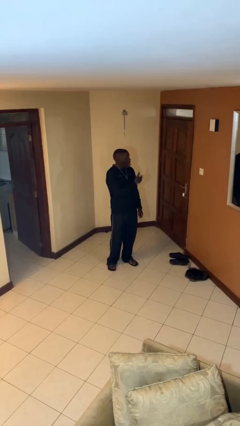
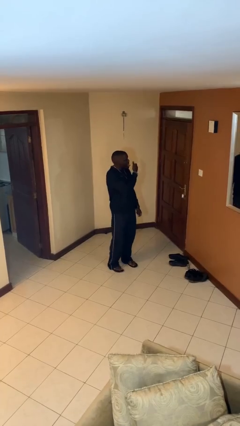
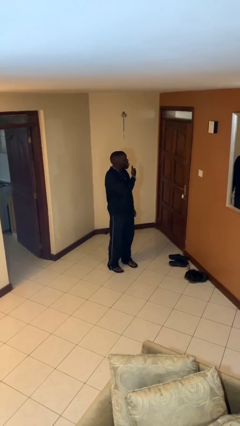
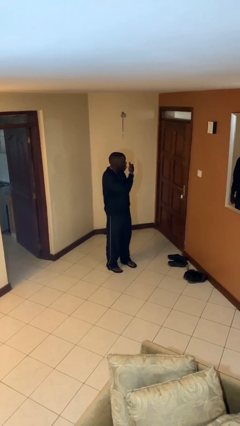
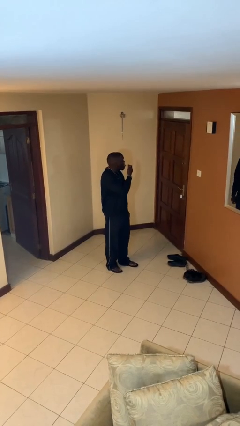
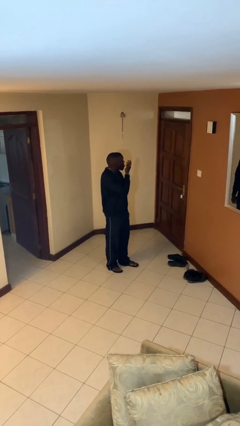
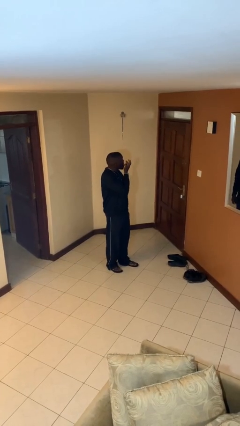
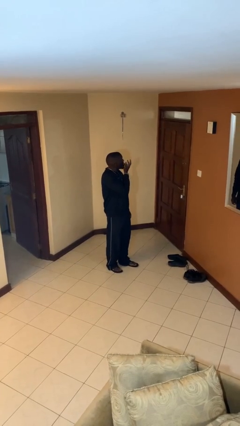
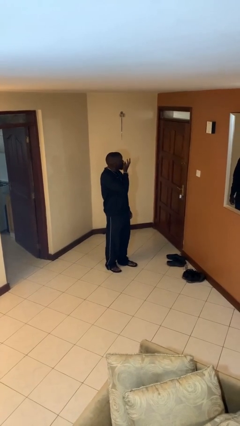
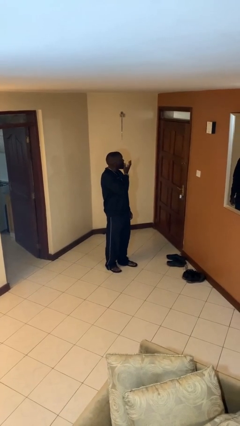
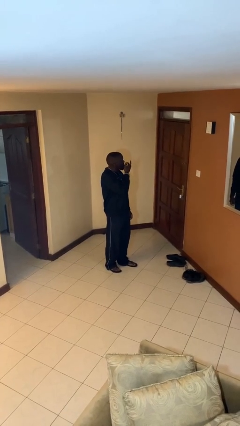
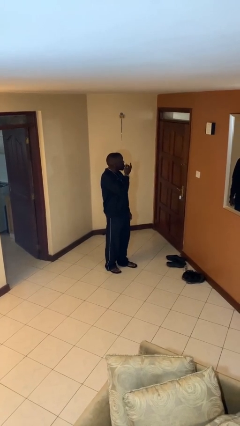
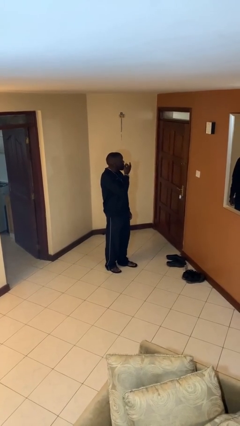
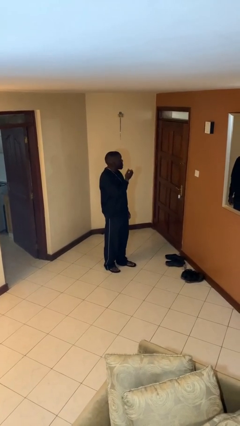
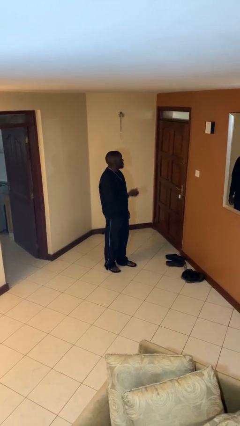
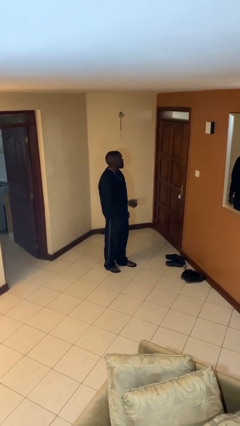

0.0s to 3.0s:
person licks fingers

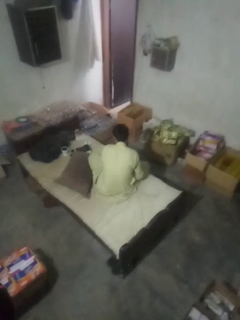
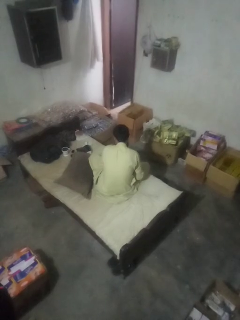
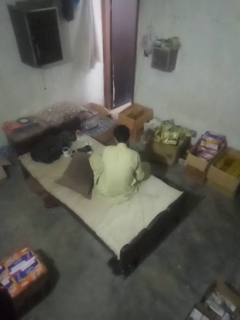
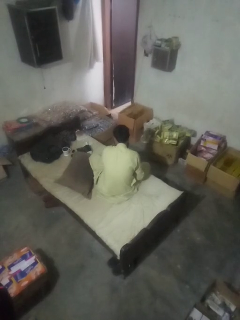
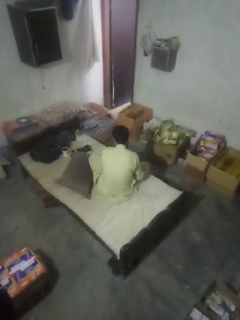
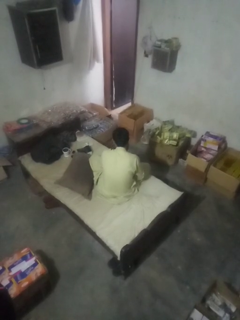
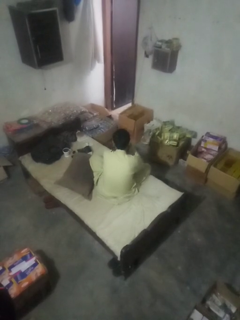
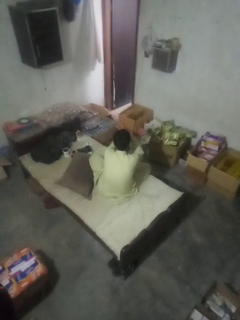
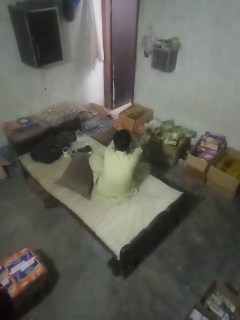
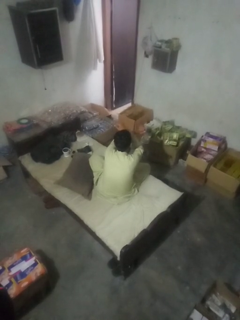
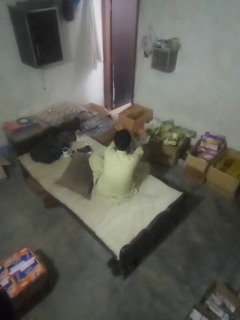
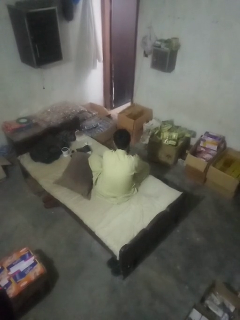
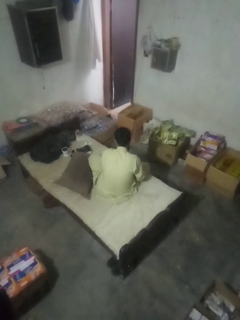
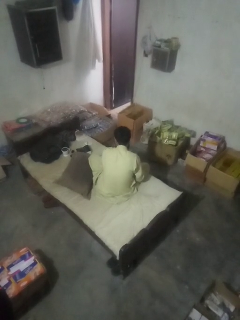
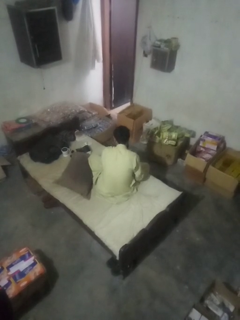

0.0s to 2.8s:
person gestures arms x

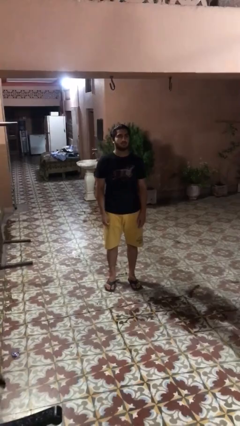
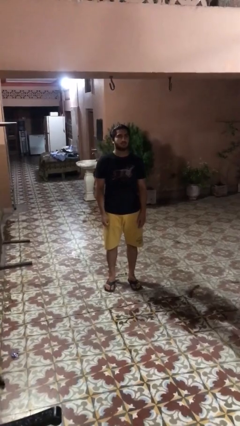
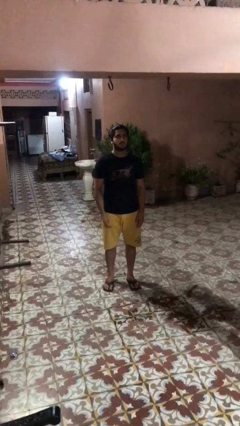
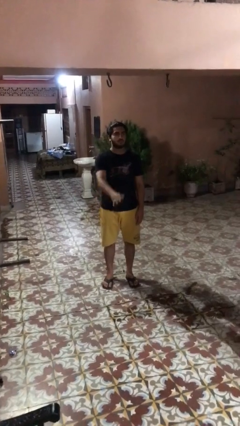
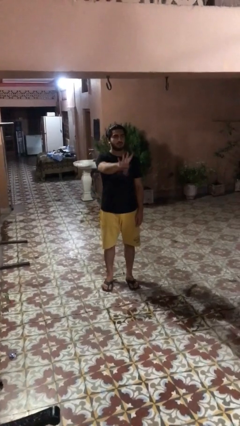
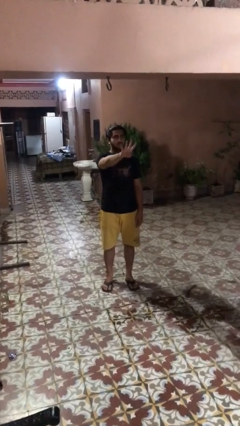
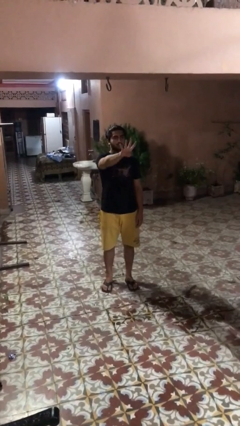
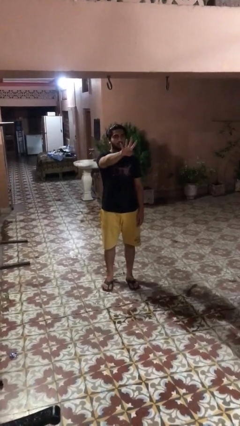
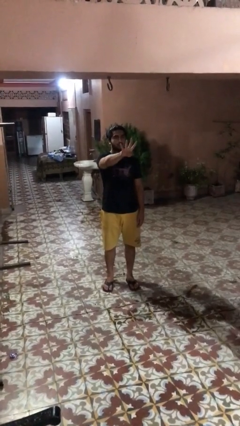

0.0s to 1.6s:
person gestures number four

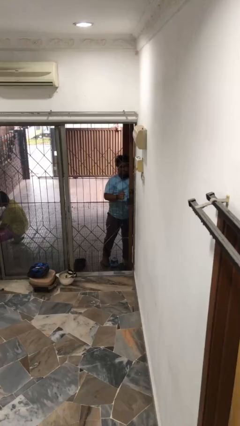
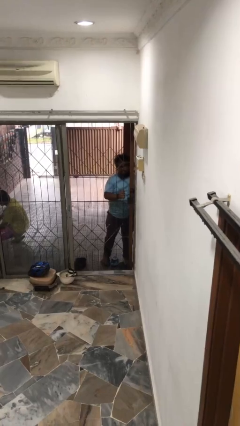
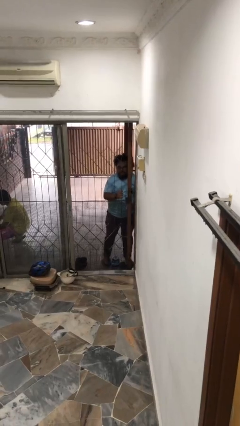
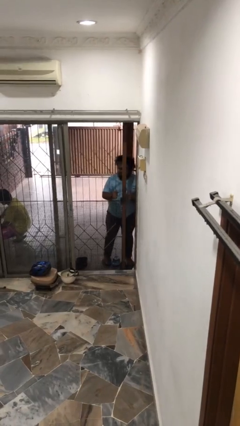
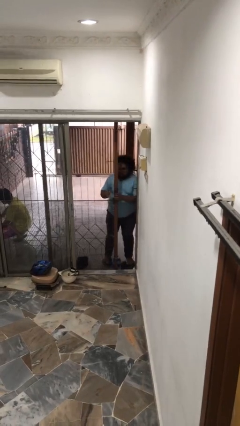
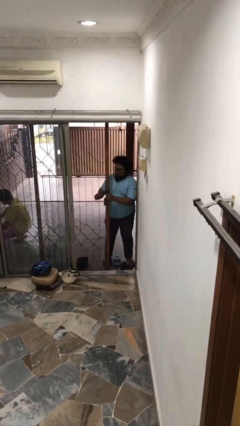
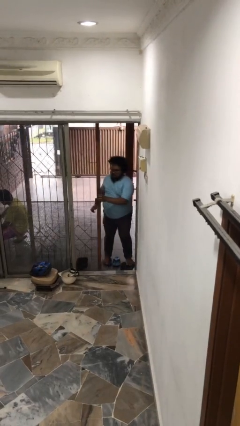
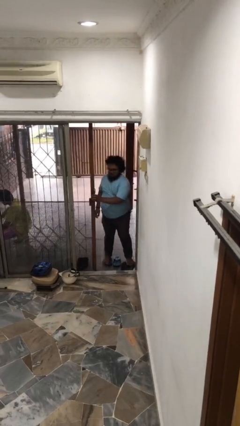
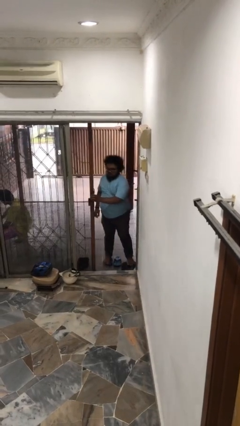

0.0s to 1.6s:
person opens facility door

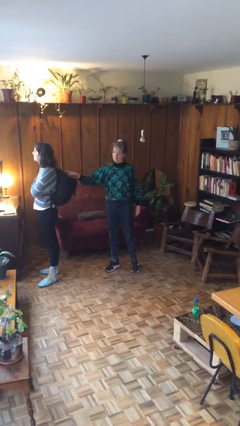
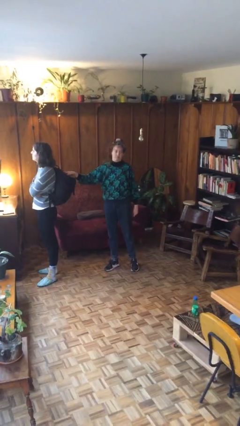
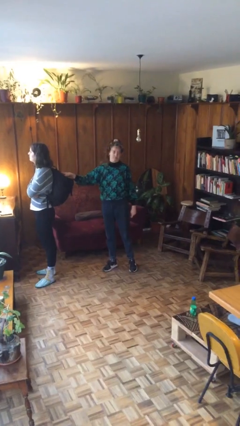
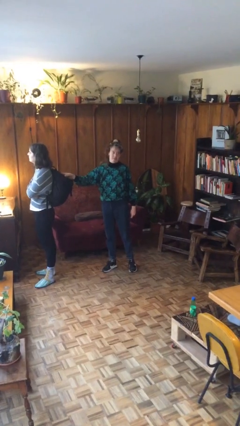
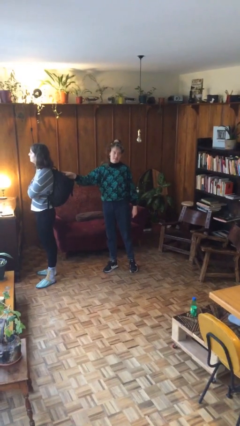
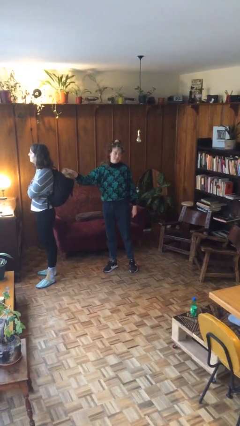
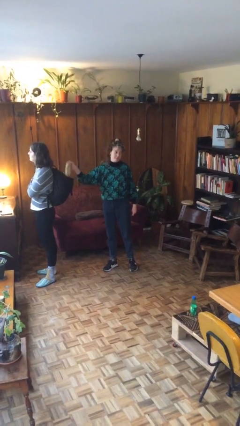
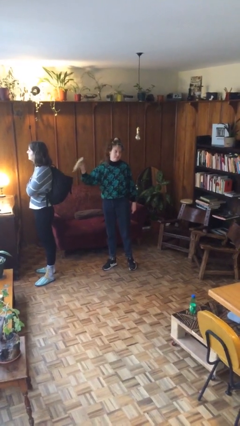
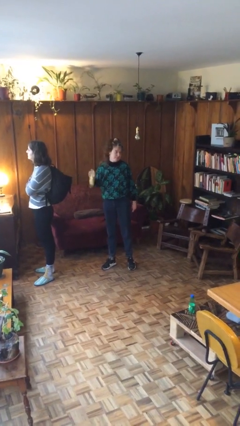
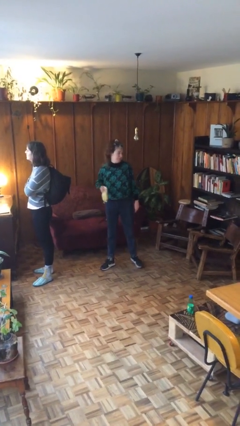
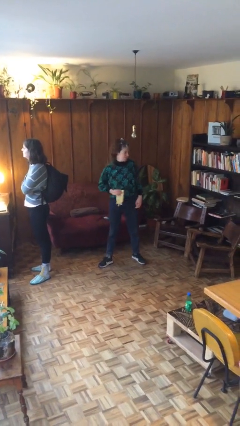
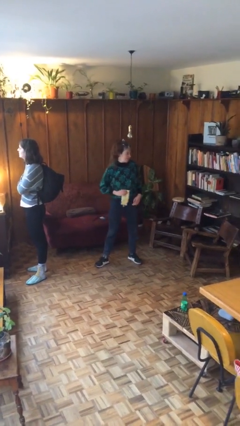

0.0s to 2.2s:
person steals object from person

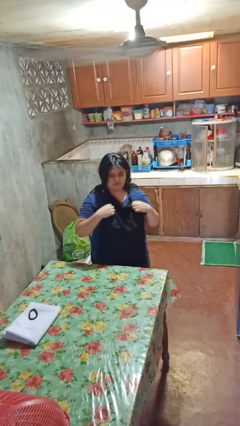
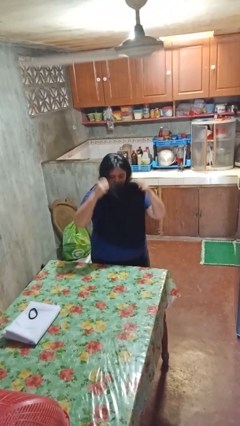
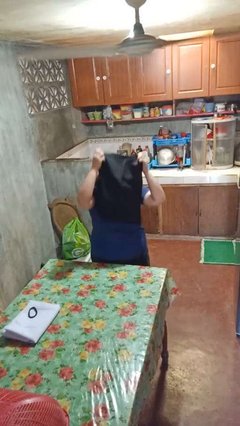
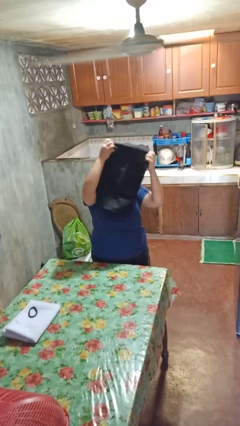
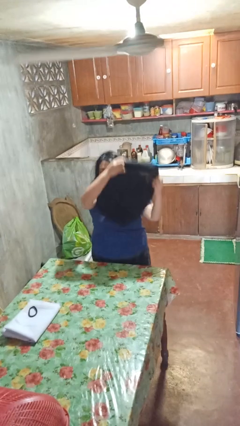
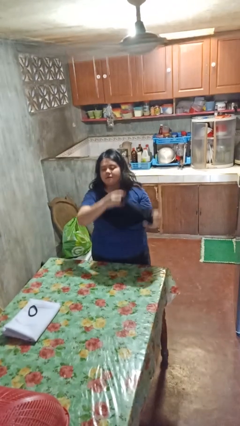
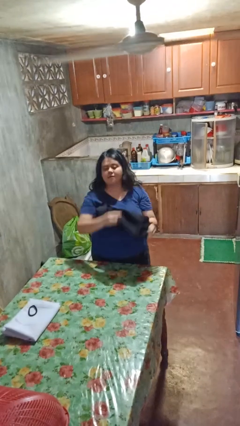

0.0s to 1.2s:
person takes off apron

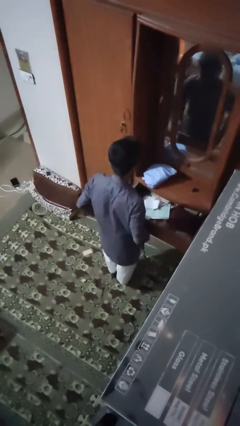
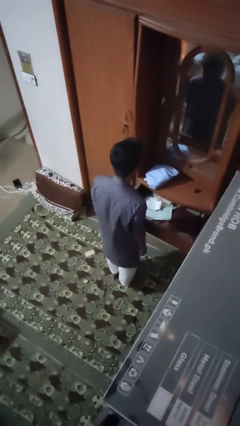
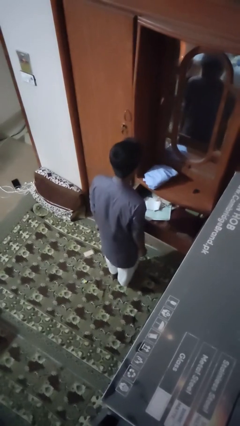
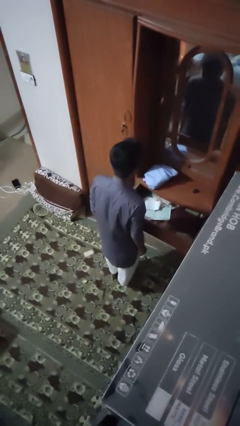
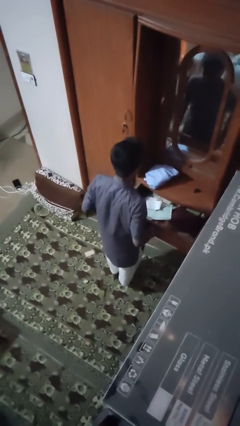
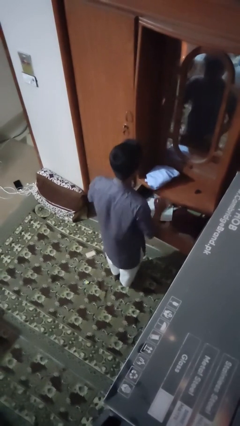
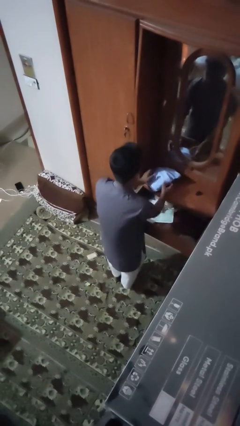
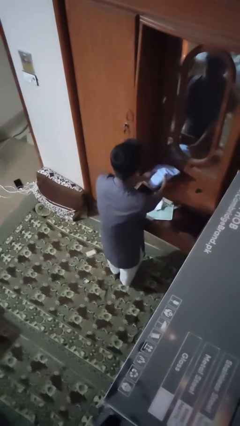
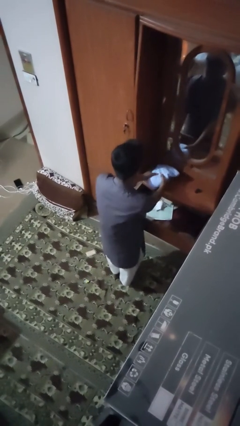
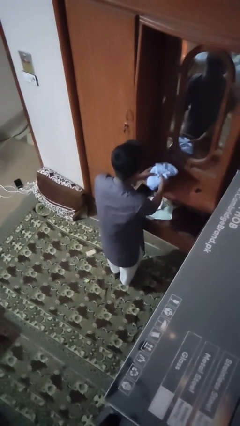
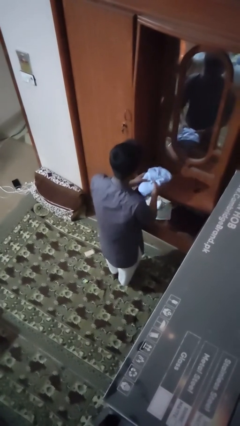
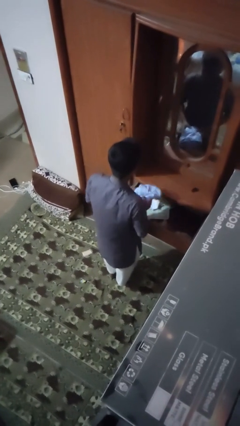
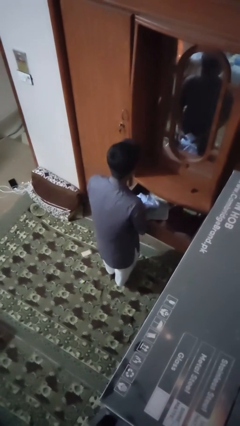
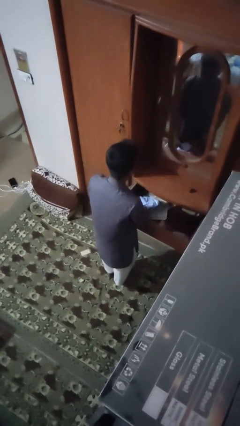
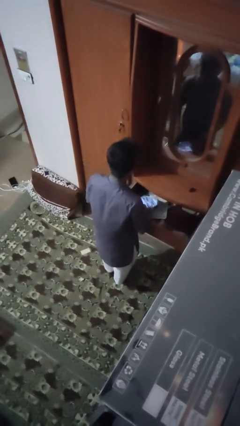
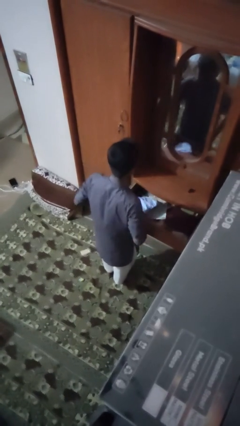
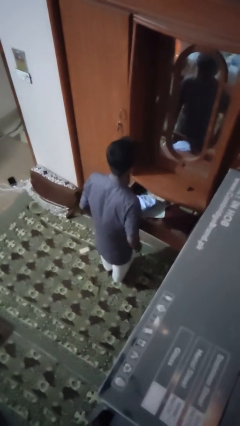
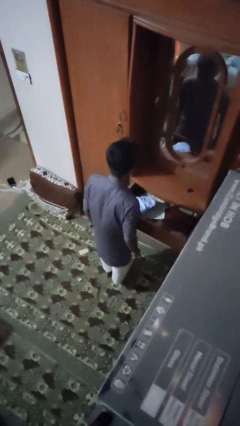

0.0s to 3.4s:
person puts clothes into dresser

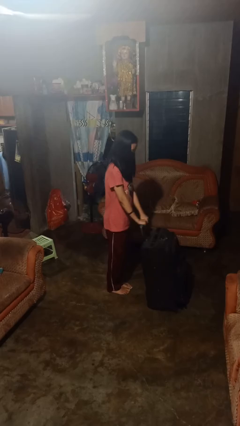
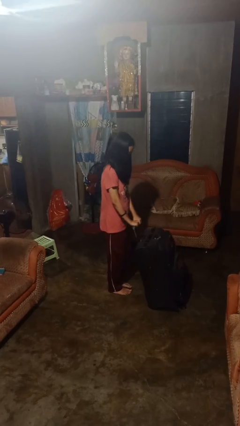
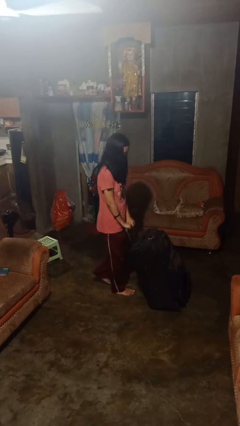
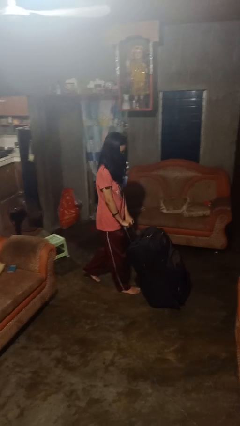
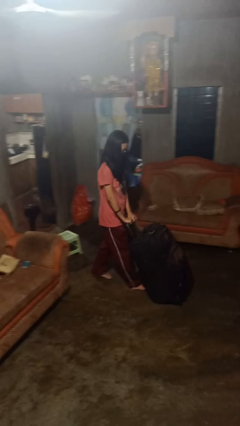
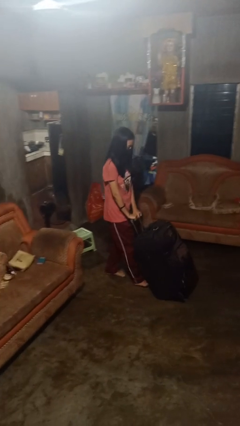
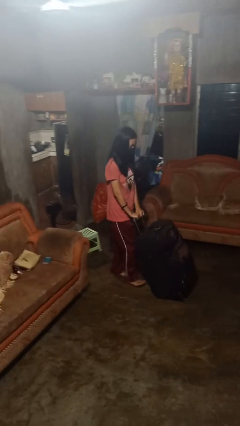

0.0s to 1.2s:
person pulls wheeled cart

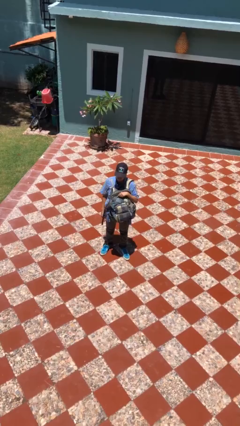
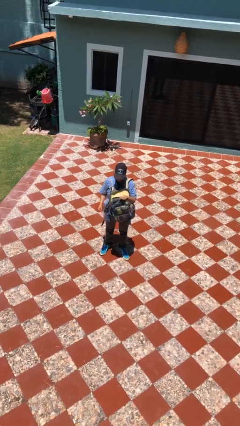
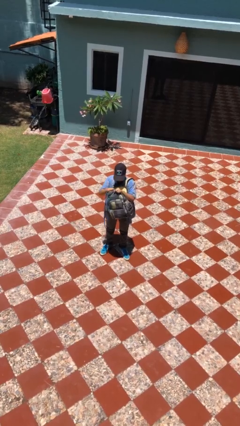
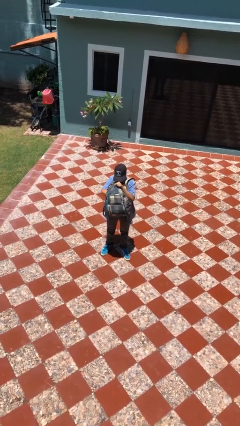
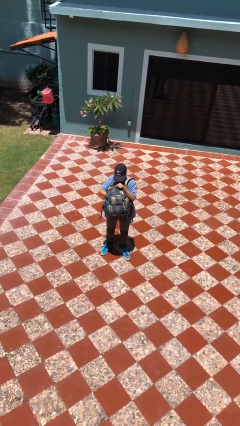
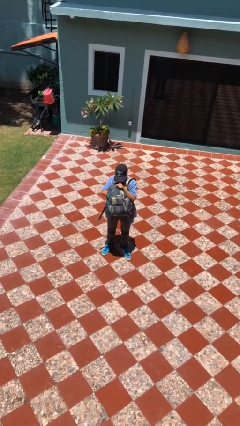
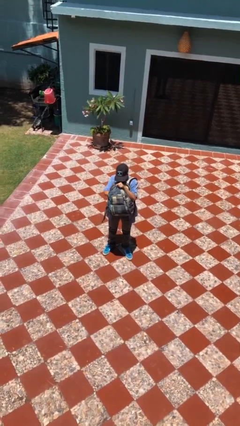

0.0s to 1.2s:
person searches in backpack
